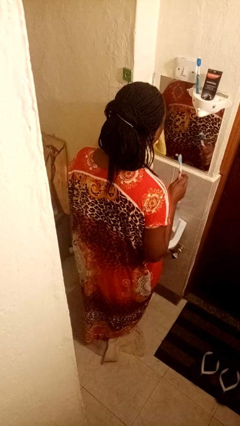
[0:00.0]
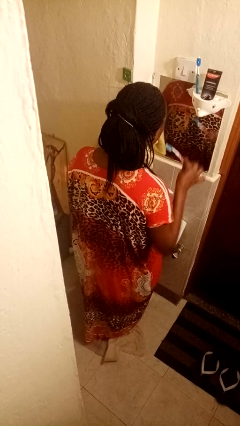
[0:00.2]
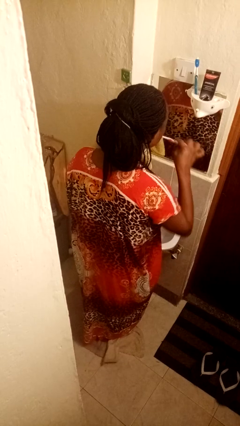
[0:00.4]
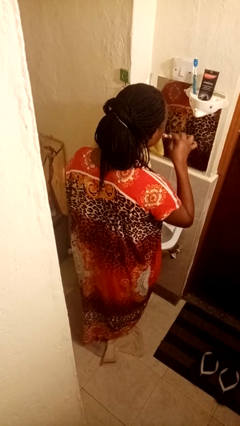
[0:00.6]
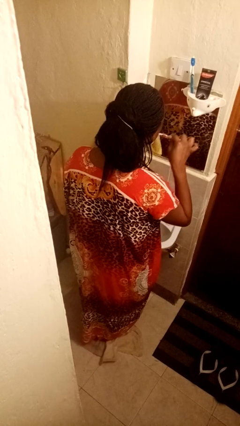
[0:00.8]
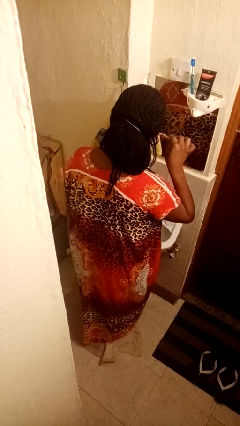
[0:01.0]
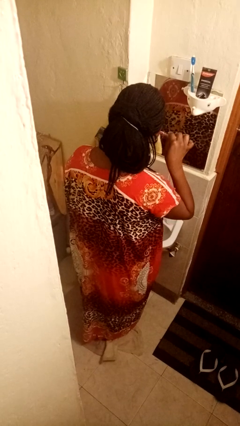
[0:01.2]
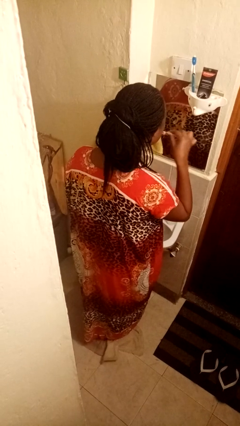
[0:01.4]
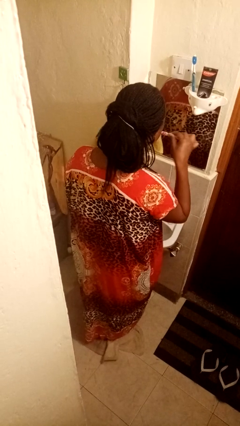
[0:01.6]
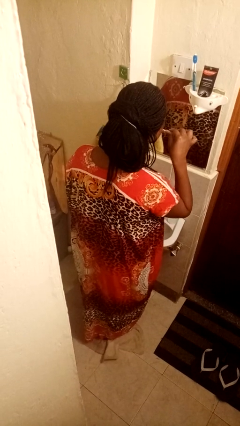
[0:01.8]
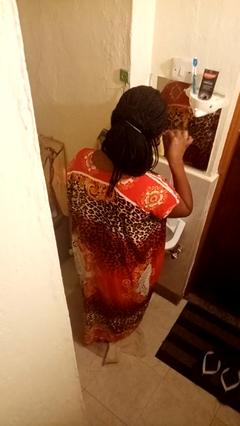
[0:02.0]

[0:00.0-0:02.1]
person brushes teeth

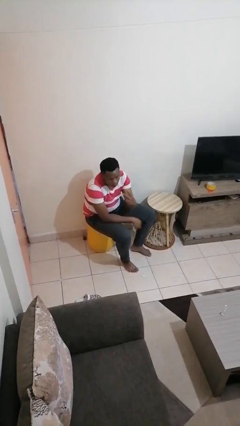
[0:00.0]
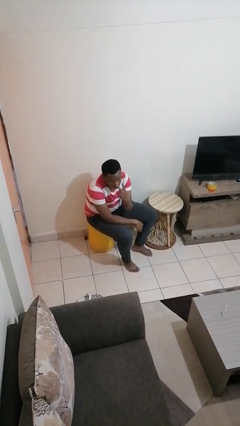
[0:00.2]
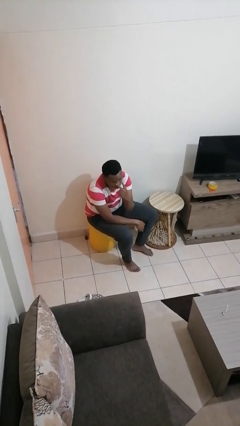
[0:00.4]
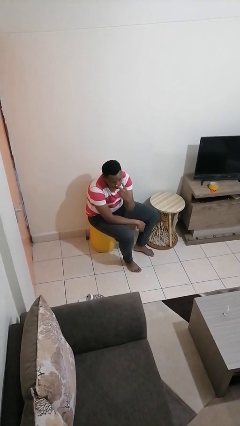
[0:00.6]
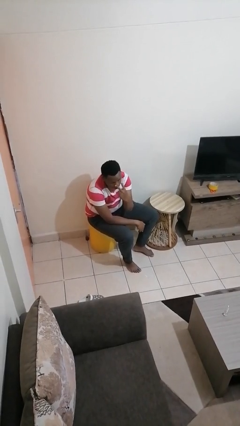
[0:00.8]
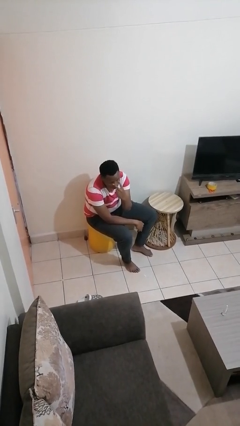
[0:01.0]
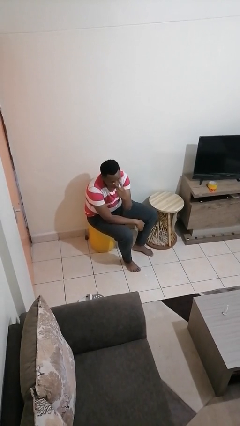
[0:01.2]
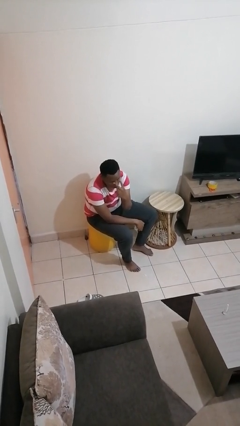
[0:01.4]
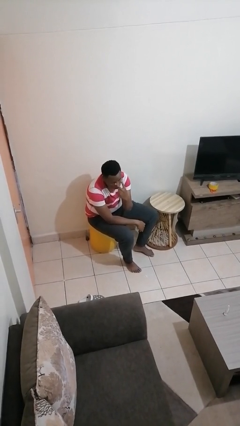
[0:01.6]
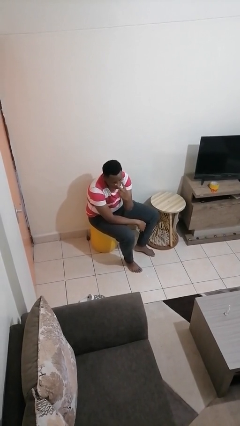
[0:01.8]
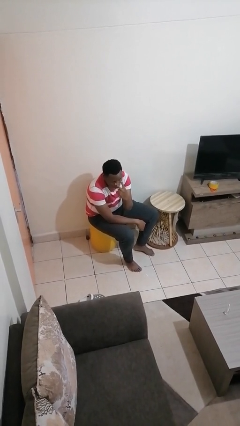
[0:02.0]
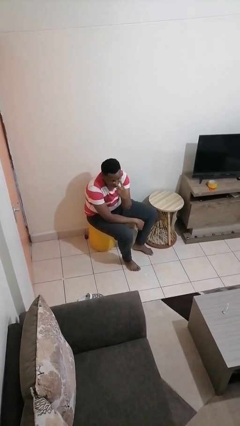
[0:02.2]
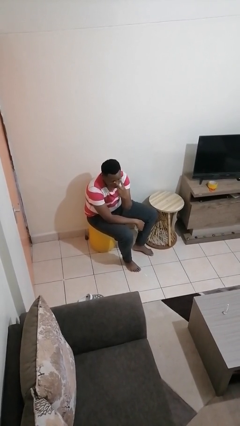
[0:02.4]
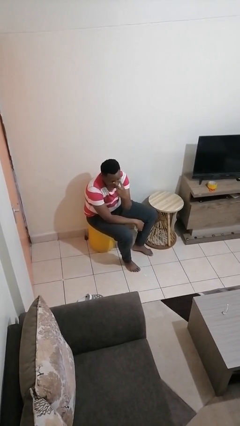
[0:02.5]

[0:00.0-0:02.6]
person gestures watch closely

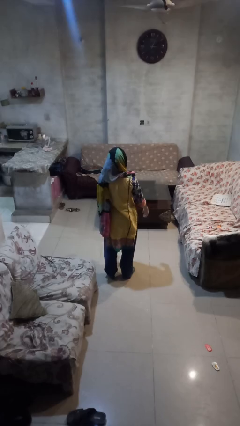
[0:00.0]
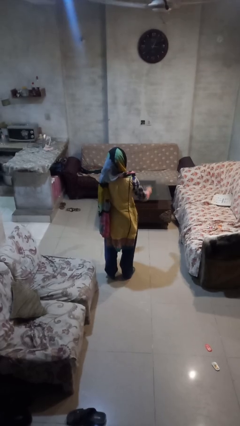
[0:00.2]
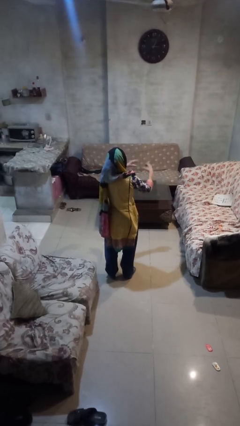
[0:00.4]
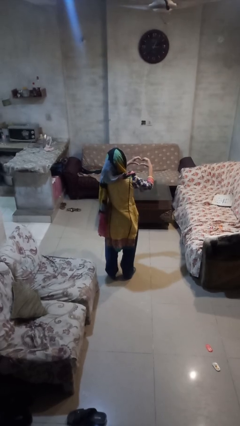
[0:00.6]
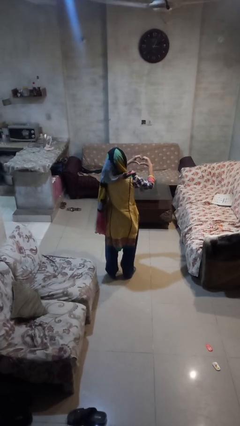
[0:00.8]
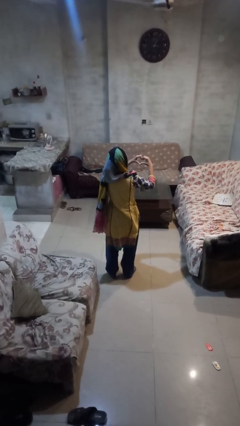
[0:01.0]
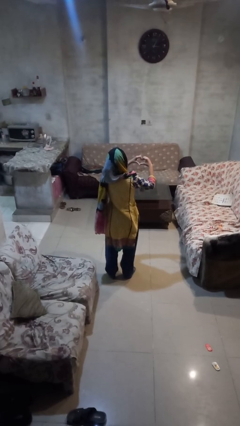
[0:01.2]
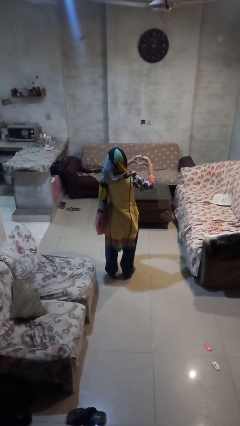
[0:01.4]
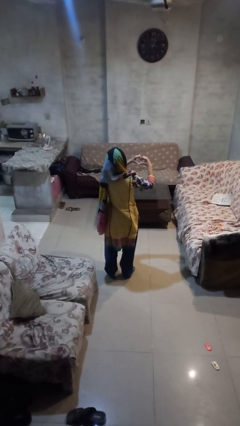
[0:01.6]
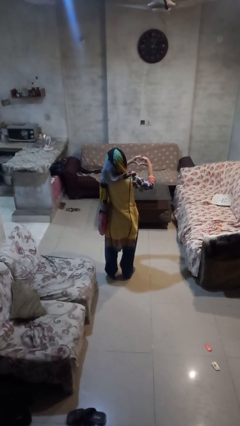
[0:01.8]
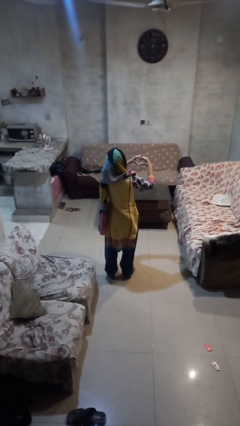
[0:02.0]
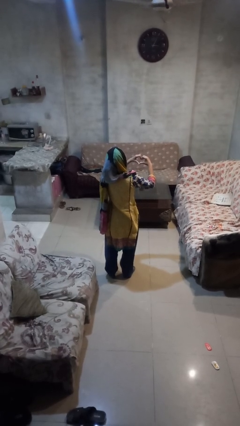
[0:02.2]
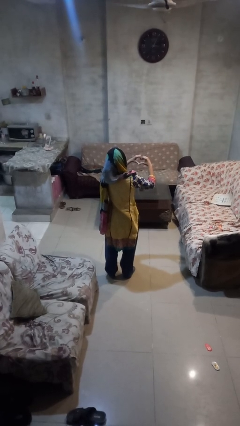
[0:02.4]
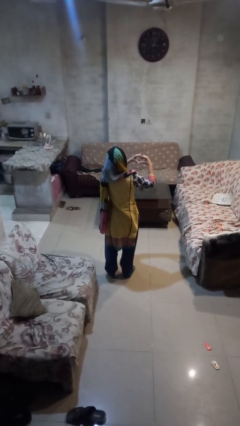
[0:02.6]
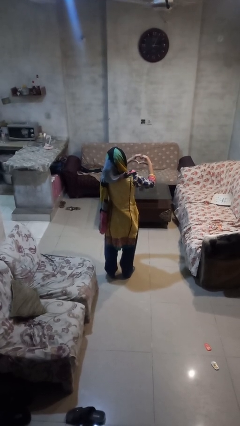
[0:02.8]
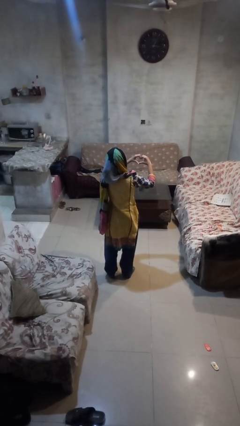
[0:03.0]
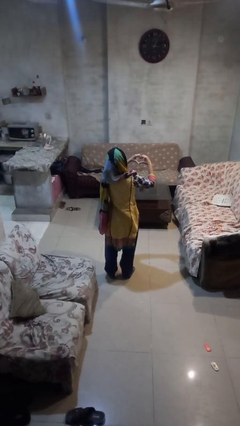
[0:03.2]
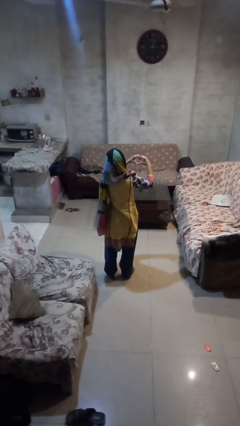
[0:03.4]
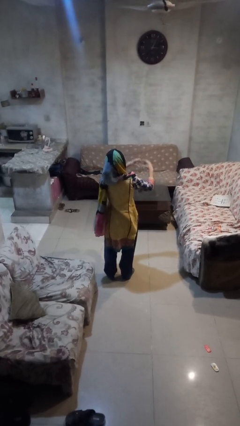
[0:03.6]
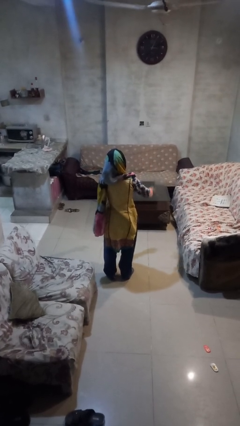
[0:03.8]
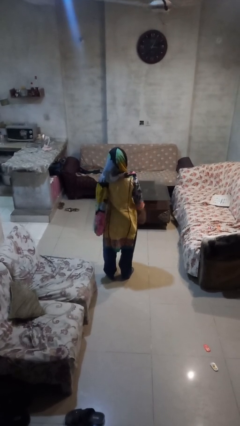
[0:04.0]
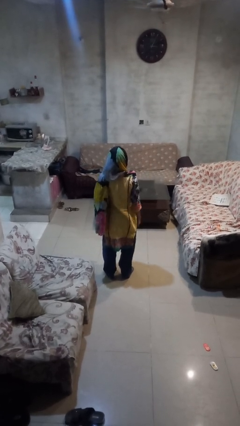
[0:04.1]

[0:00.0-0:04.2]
person gestures heart

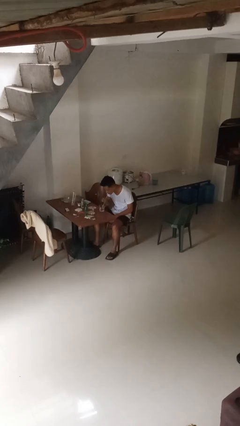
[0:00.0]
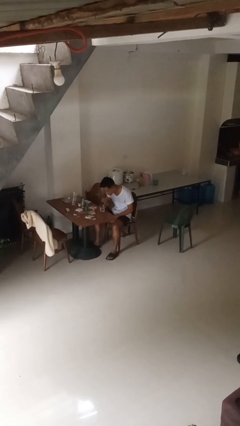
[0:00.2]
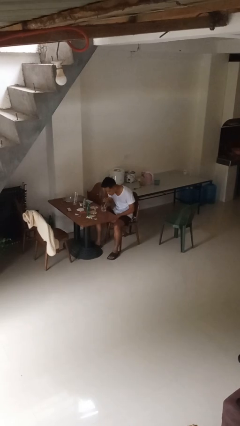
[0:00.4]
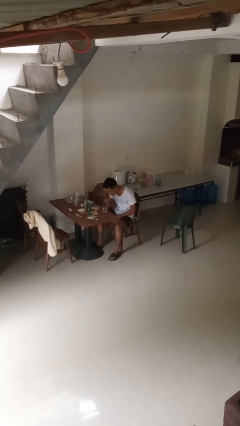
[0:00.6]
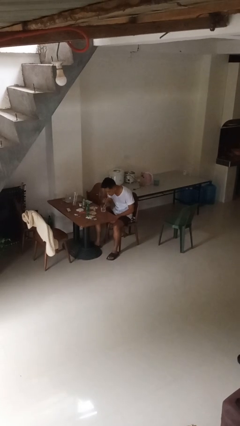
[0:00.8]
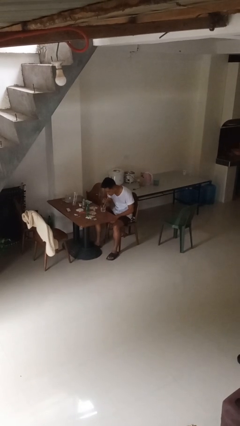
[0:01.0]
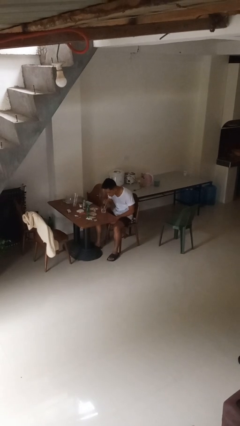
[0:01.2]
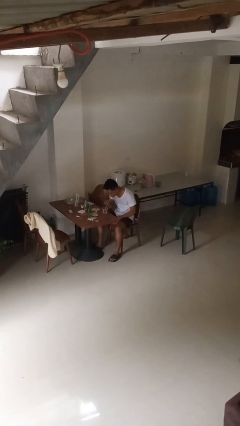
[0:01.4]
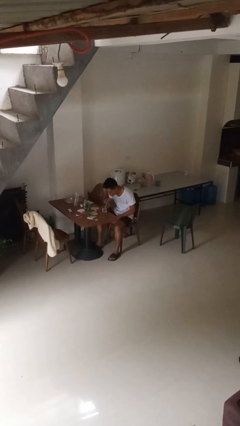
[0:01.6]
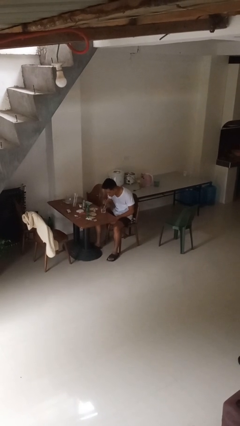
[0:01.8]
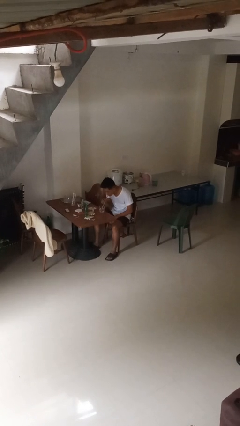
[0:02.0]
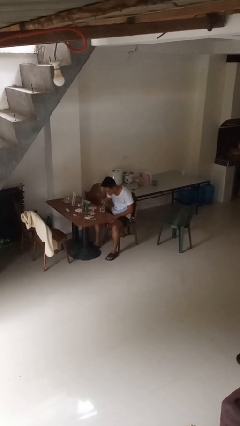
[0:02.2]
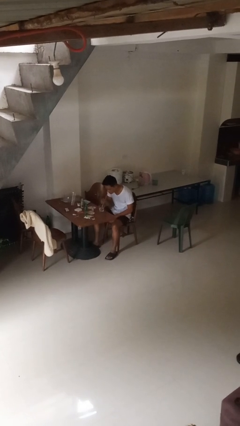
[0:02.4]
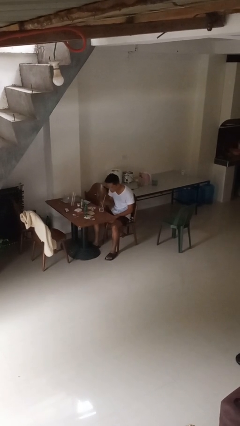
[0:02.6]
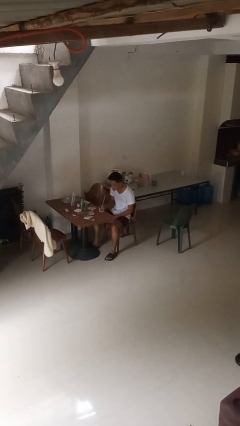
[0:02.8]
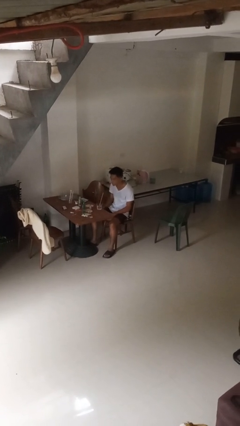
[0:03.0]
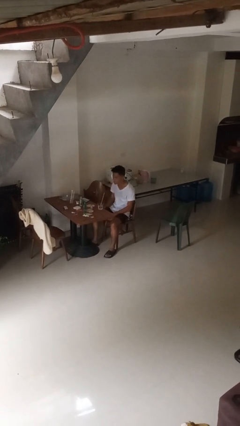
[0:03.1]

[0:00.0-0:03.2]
person drinks from straw

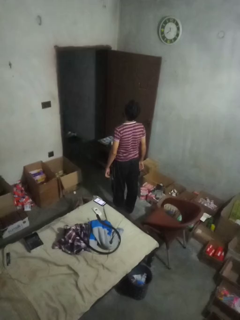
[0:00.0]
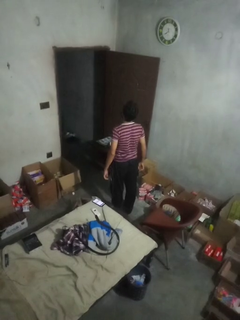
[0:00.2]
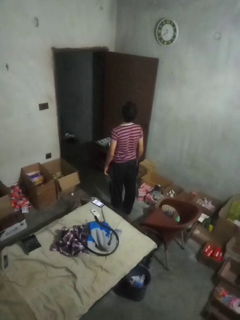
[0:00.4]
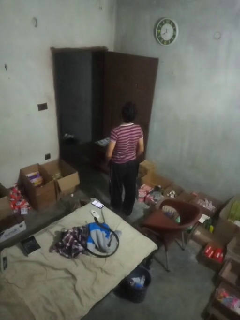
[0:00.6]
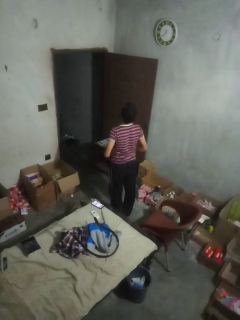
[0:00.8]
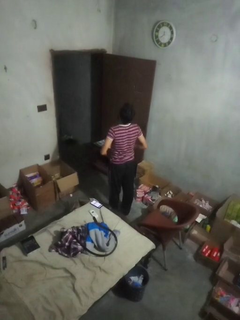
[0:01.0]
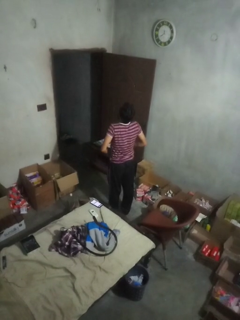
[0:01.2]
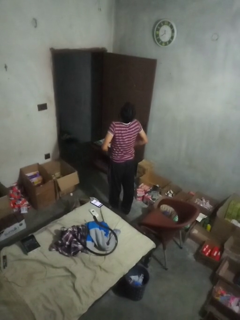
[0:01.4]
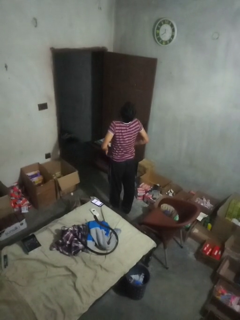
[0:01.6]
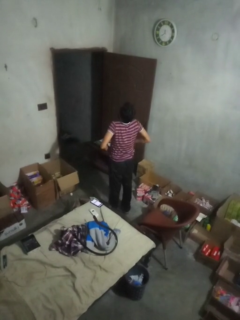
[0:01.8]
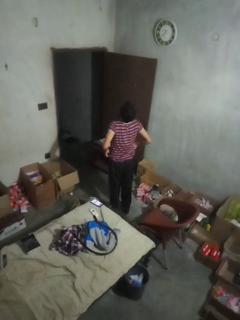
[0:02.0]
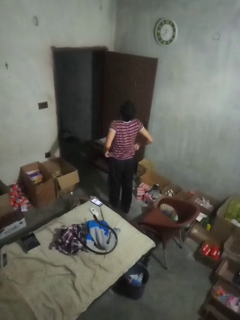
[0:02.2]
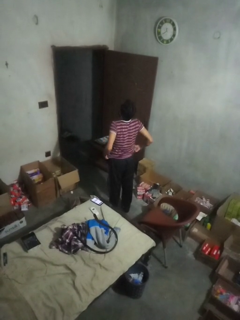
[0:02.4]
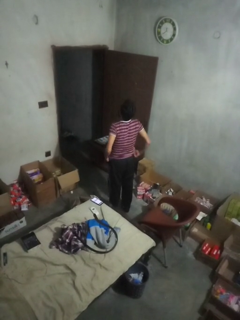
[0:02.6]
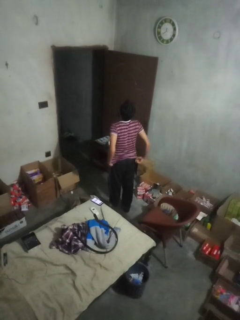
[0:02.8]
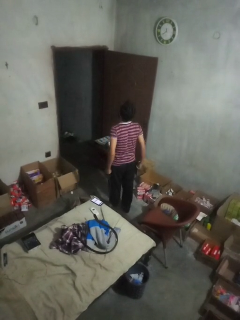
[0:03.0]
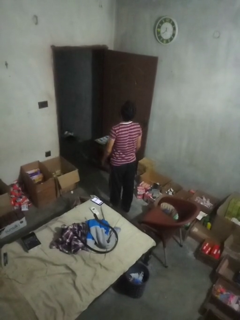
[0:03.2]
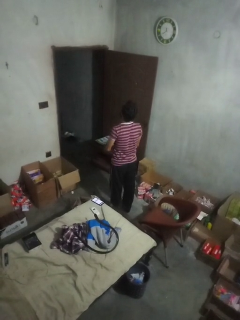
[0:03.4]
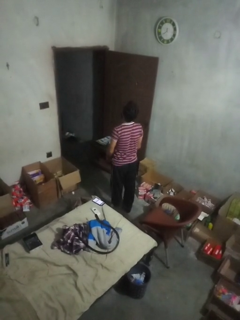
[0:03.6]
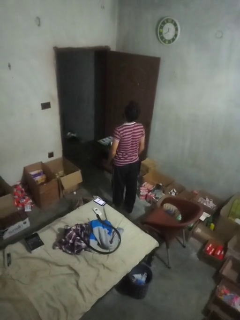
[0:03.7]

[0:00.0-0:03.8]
person hikes up pants

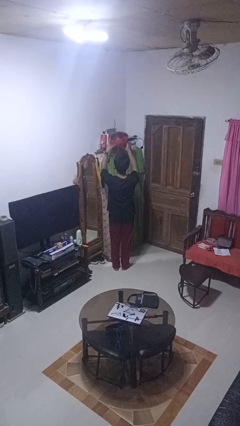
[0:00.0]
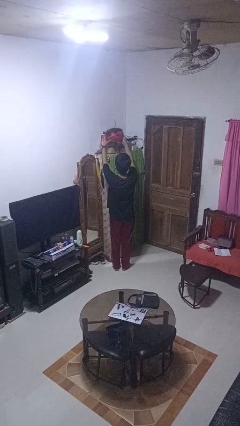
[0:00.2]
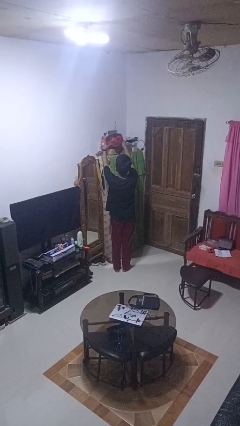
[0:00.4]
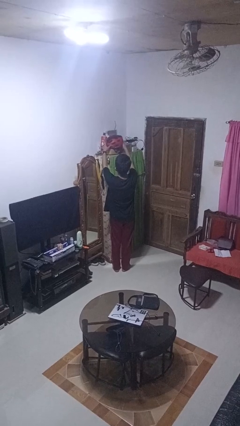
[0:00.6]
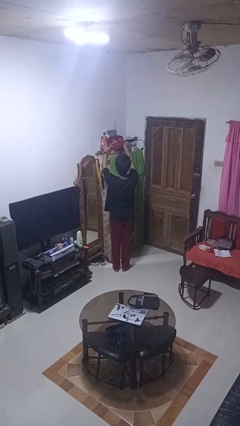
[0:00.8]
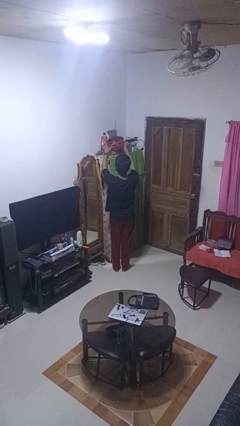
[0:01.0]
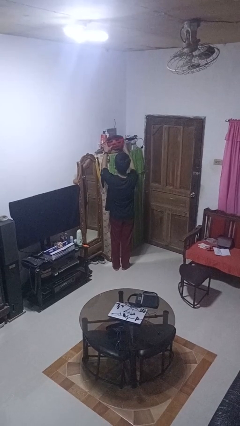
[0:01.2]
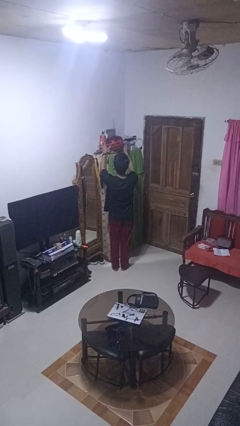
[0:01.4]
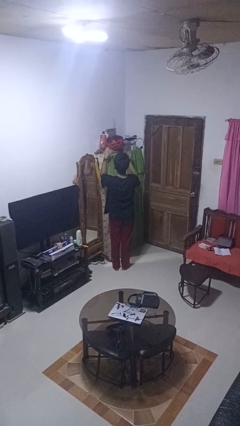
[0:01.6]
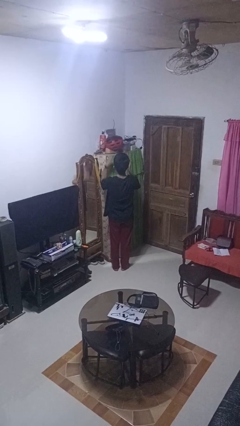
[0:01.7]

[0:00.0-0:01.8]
person puts down object on shelf

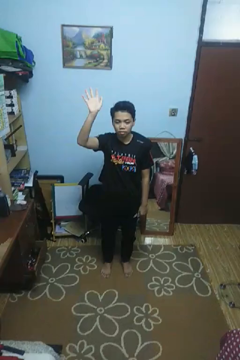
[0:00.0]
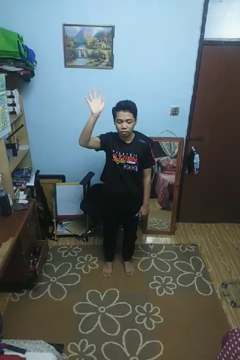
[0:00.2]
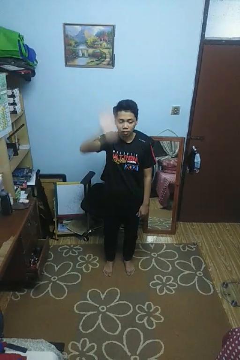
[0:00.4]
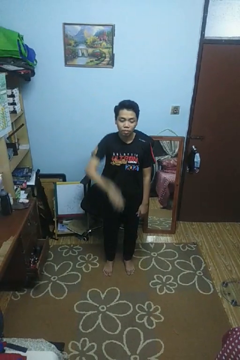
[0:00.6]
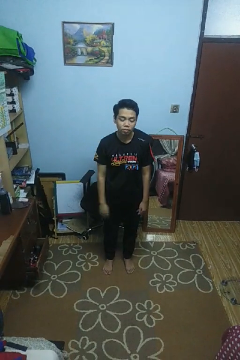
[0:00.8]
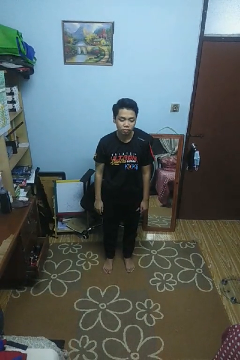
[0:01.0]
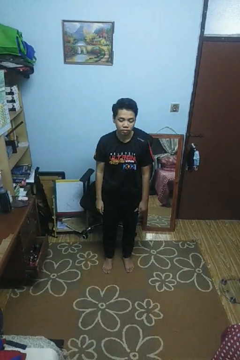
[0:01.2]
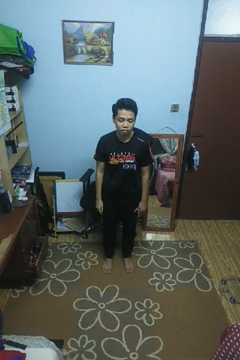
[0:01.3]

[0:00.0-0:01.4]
person gestures swipe down
